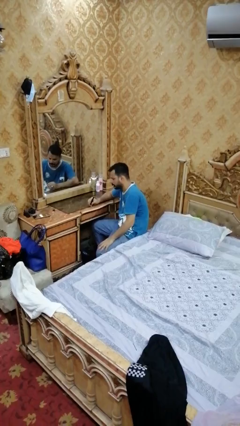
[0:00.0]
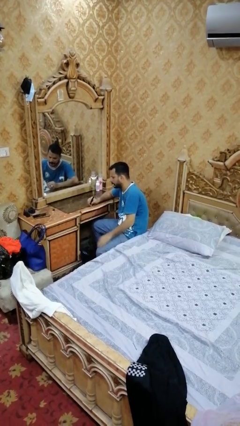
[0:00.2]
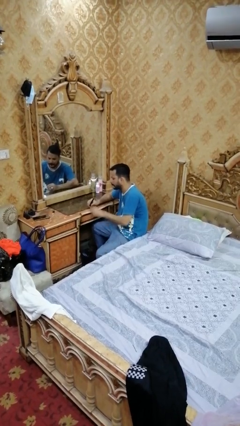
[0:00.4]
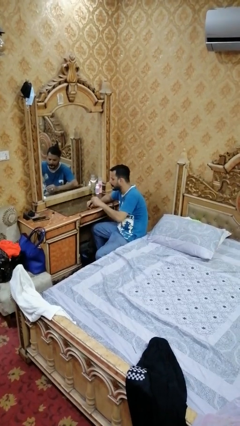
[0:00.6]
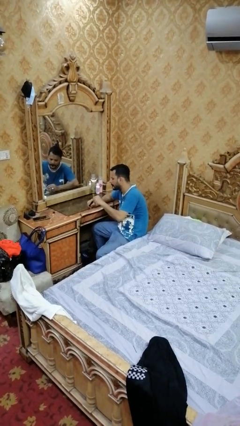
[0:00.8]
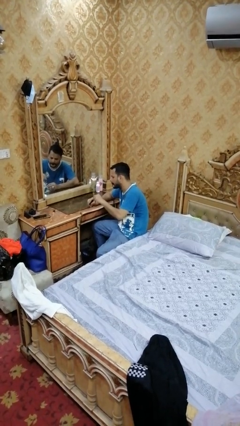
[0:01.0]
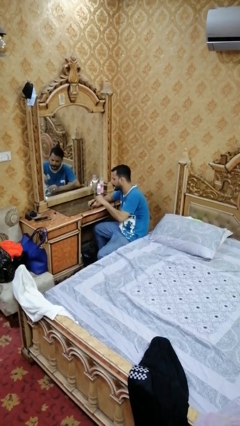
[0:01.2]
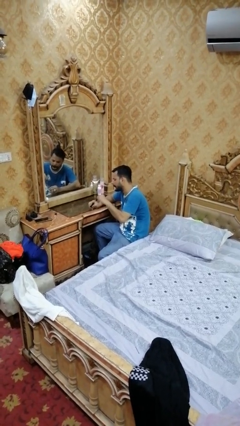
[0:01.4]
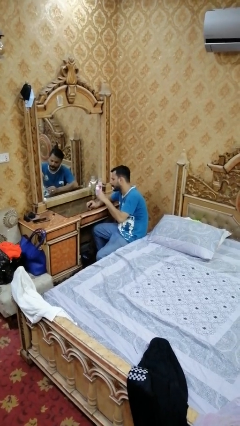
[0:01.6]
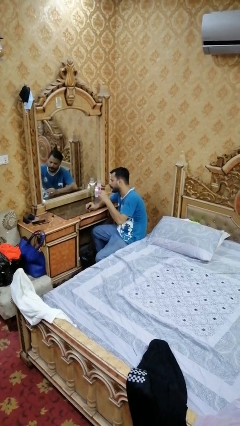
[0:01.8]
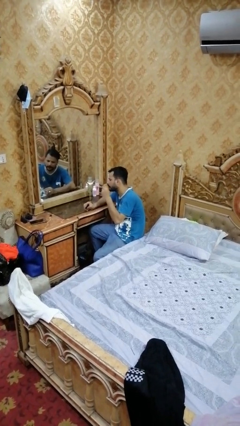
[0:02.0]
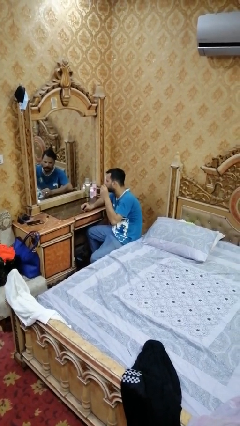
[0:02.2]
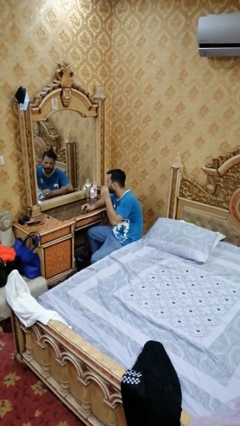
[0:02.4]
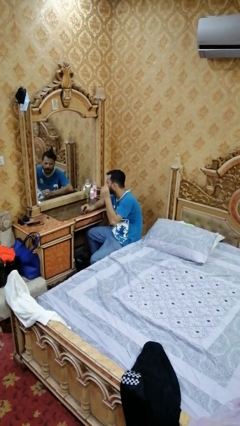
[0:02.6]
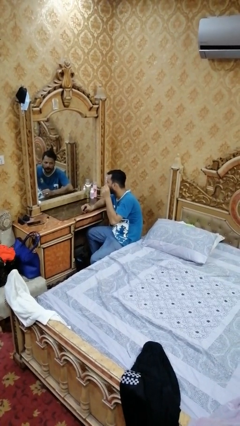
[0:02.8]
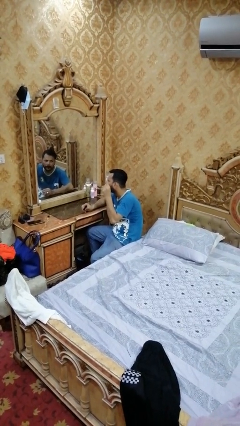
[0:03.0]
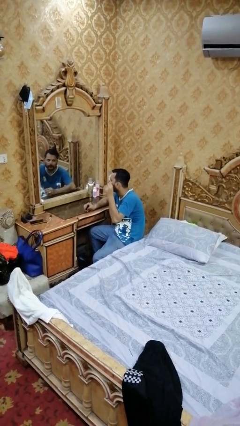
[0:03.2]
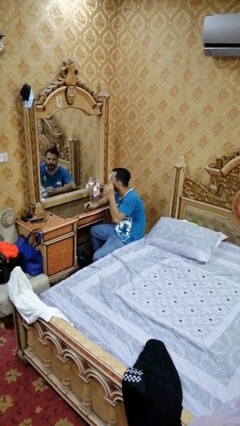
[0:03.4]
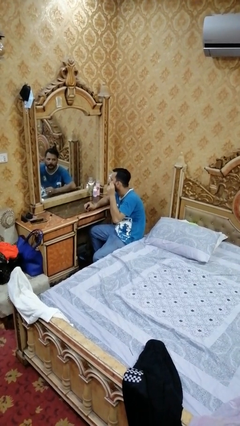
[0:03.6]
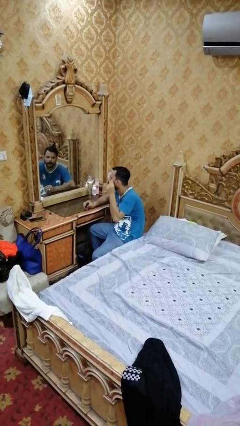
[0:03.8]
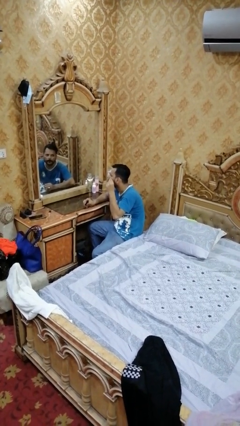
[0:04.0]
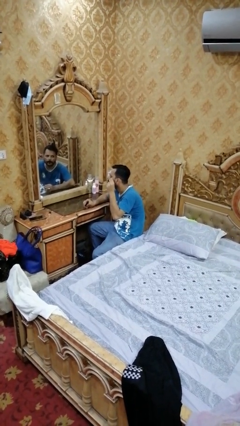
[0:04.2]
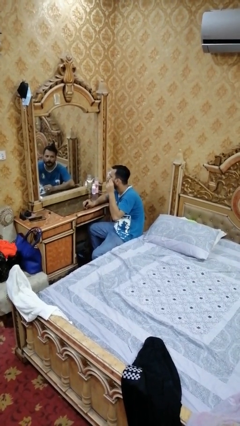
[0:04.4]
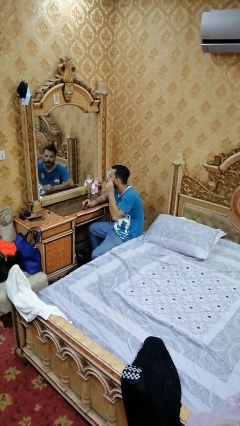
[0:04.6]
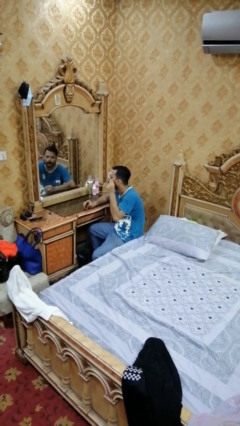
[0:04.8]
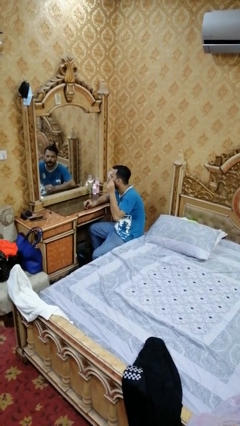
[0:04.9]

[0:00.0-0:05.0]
person applies eye makeup

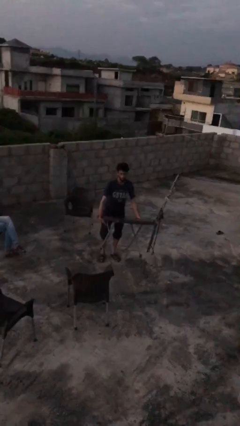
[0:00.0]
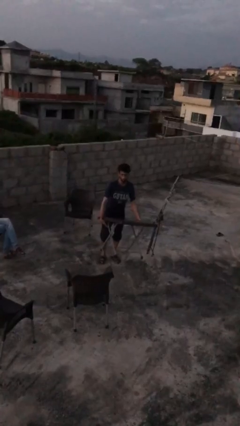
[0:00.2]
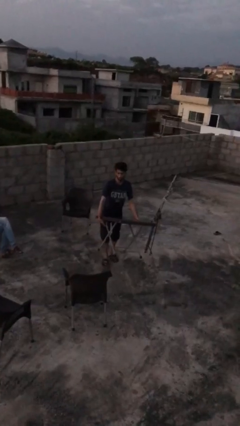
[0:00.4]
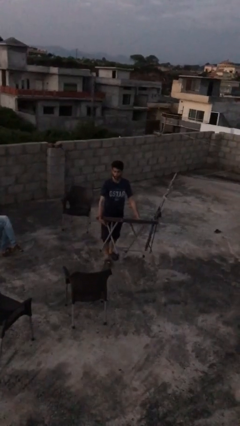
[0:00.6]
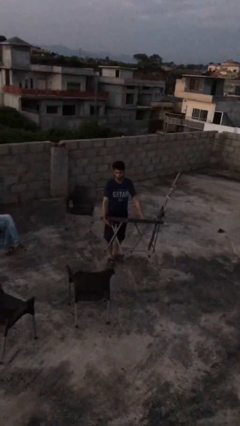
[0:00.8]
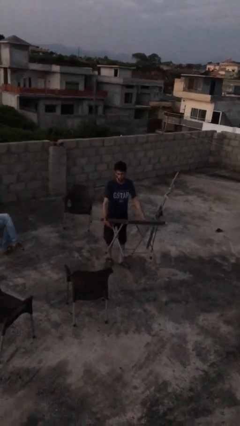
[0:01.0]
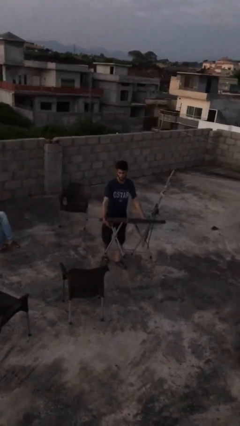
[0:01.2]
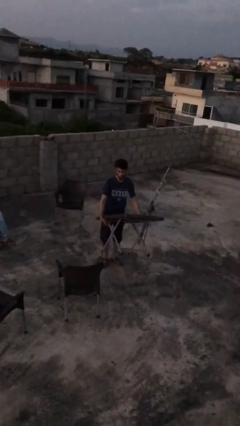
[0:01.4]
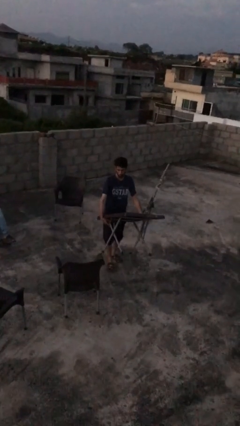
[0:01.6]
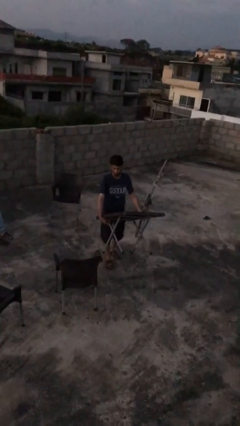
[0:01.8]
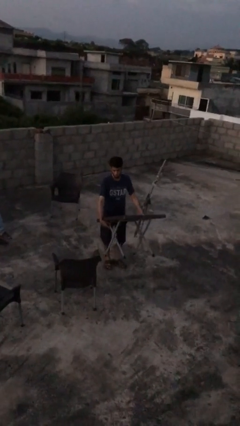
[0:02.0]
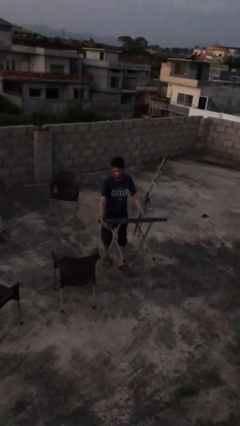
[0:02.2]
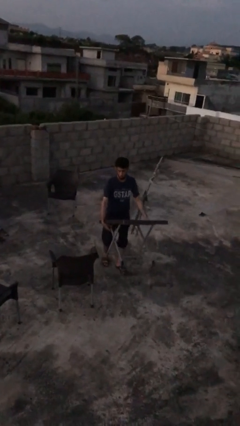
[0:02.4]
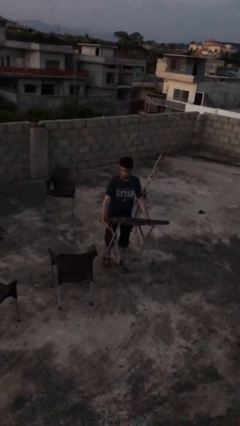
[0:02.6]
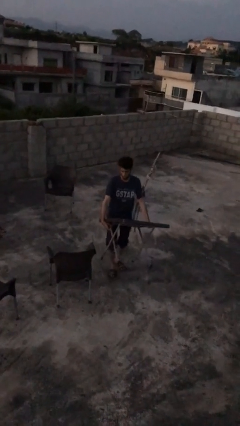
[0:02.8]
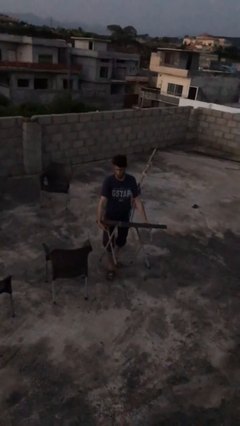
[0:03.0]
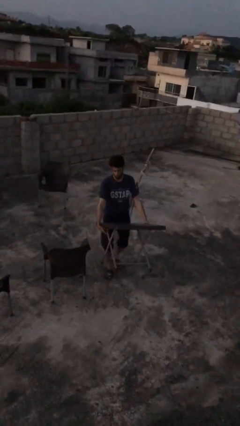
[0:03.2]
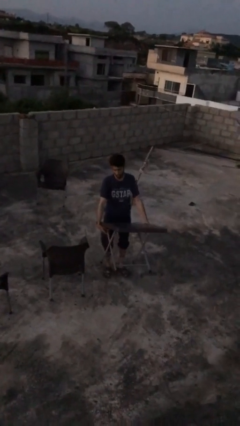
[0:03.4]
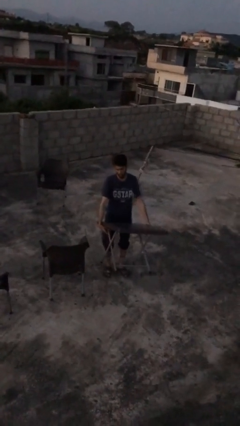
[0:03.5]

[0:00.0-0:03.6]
person carries heavy object

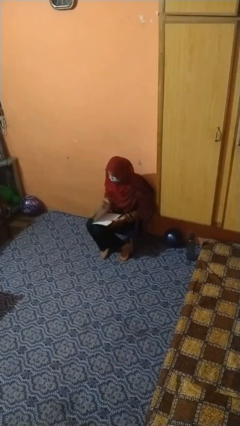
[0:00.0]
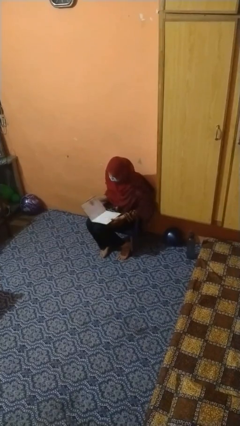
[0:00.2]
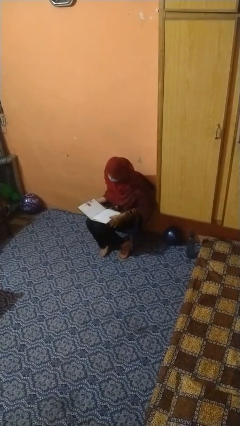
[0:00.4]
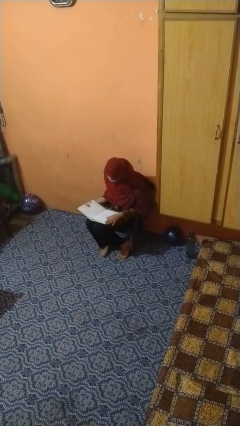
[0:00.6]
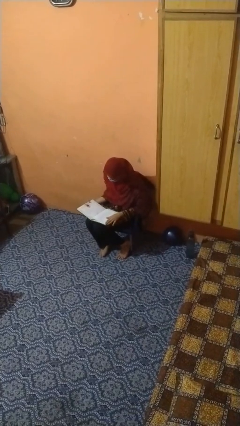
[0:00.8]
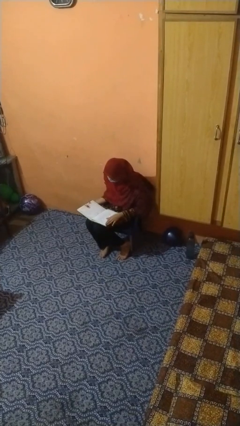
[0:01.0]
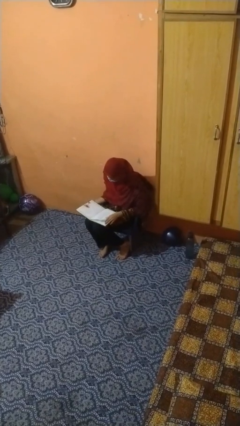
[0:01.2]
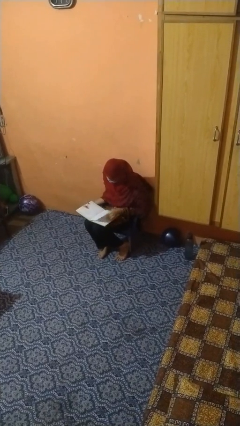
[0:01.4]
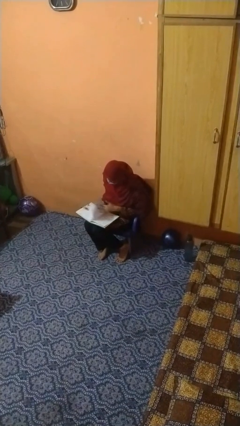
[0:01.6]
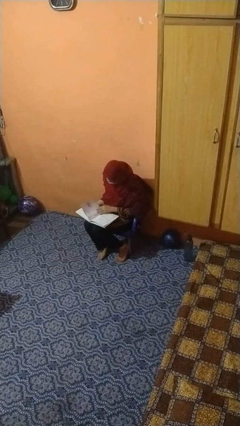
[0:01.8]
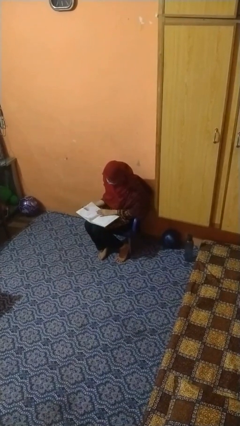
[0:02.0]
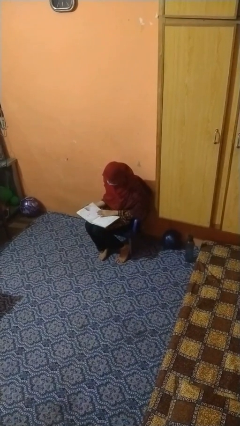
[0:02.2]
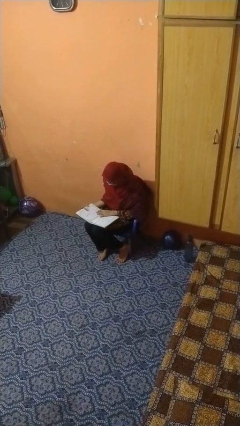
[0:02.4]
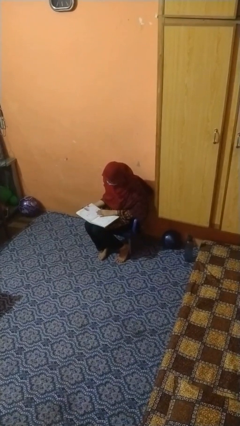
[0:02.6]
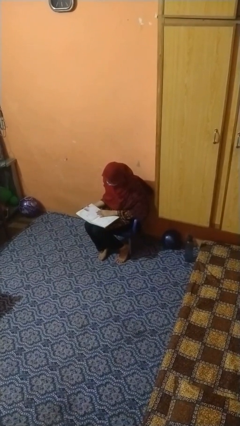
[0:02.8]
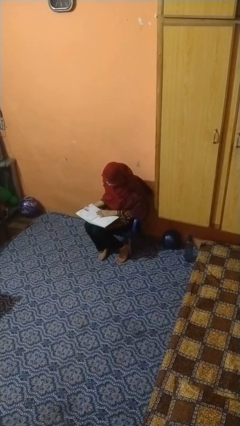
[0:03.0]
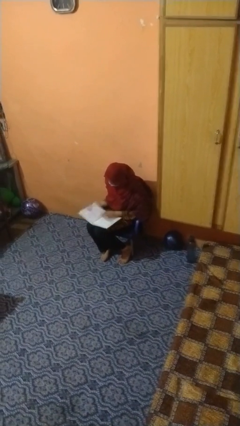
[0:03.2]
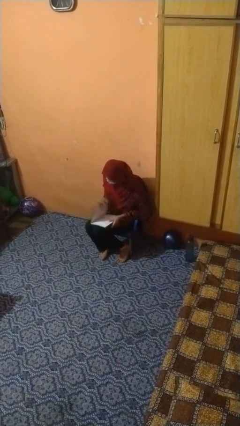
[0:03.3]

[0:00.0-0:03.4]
person reads book

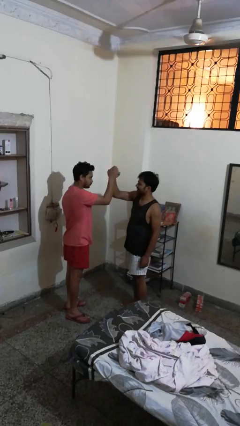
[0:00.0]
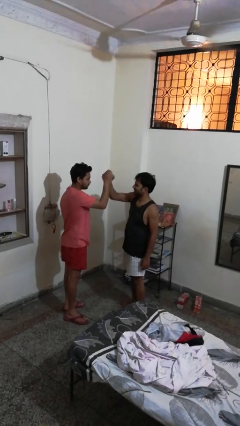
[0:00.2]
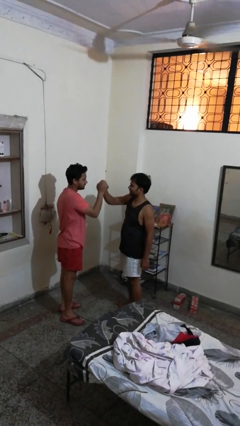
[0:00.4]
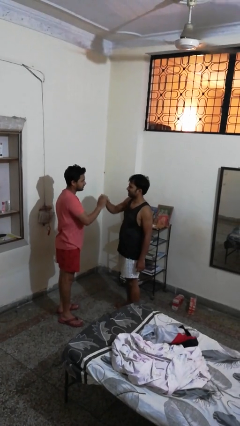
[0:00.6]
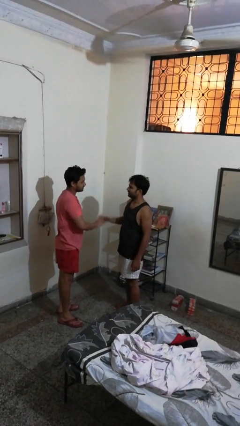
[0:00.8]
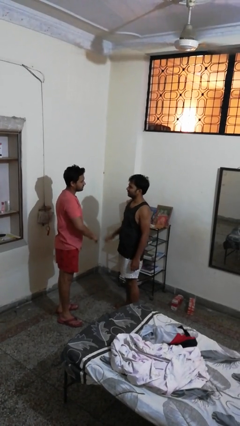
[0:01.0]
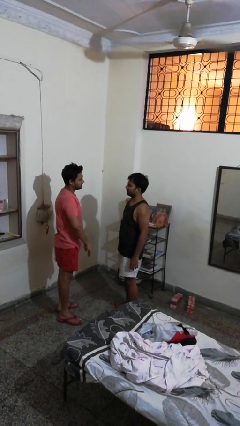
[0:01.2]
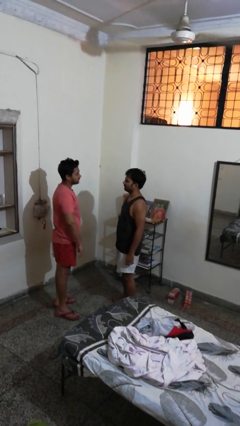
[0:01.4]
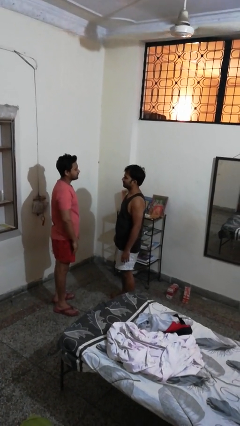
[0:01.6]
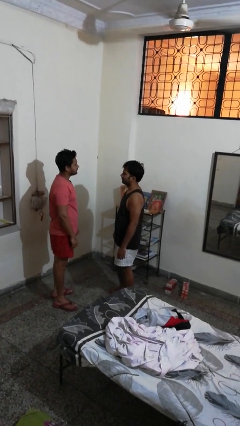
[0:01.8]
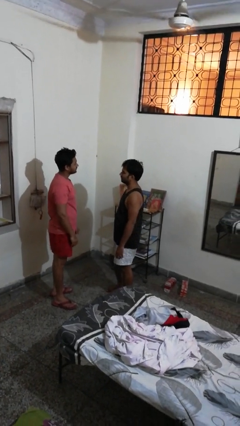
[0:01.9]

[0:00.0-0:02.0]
person highfives hand

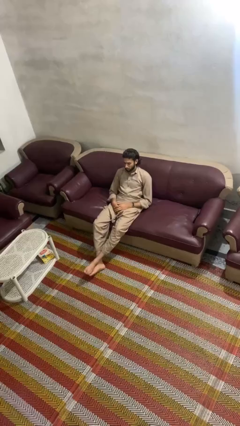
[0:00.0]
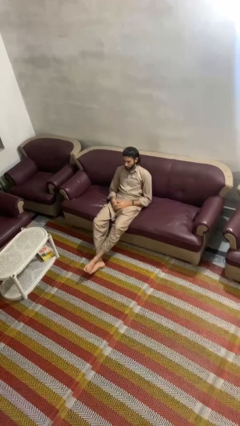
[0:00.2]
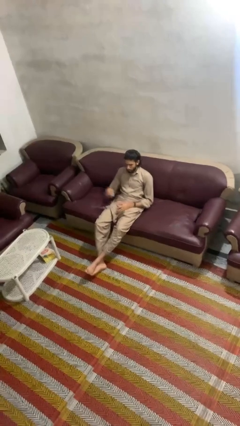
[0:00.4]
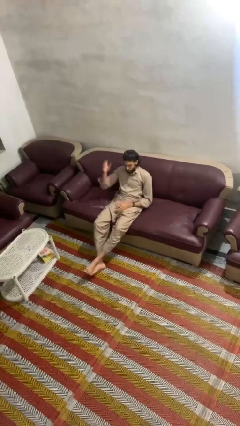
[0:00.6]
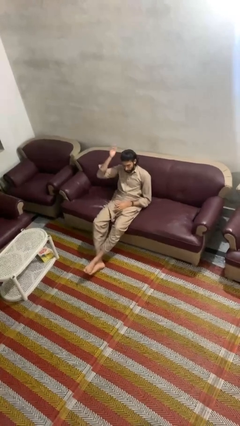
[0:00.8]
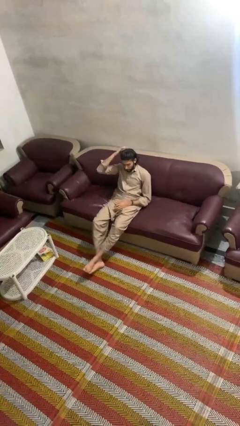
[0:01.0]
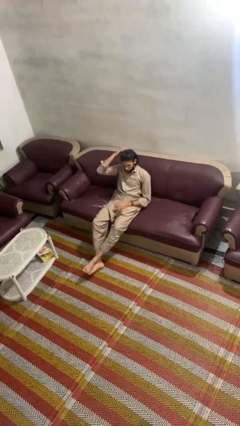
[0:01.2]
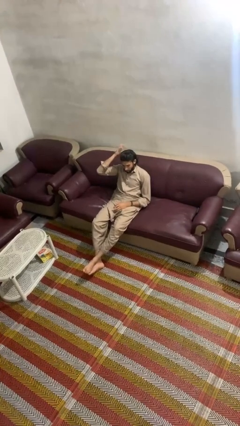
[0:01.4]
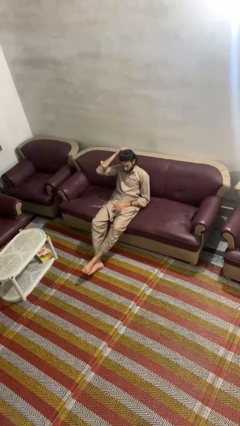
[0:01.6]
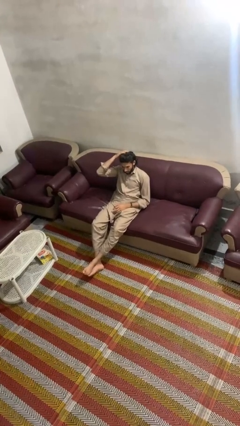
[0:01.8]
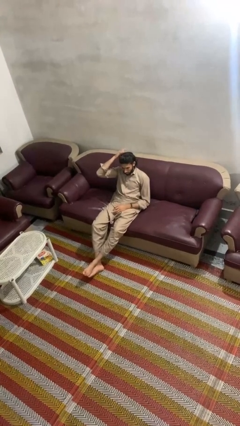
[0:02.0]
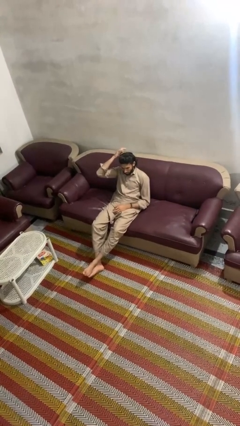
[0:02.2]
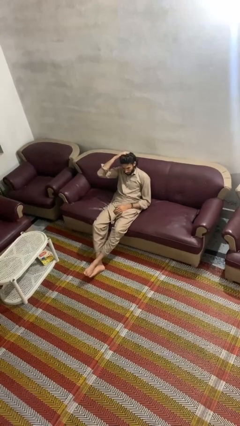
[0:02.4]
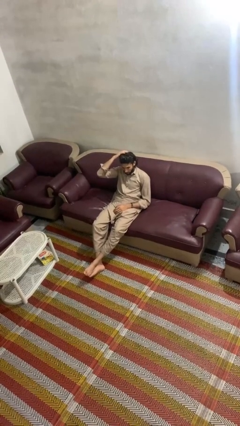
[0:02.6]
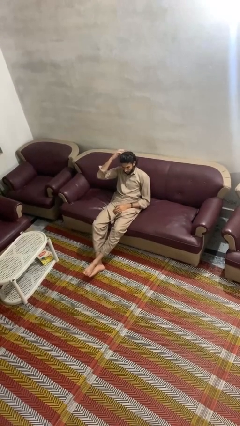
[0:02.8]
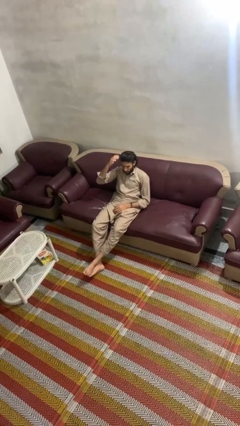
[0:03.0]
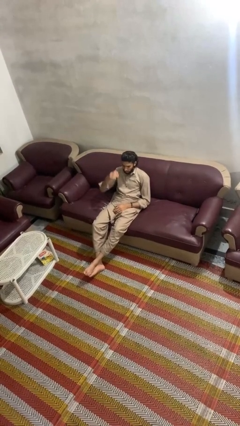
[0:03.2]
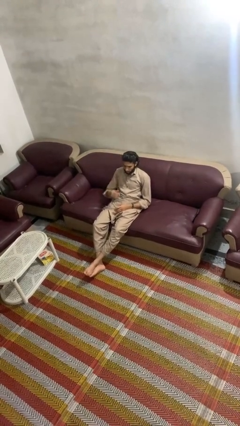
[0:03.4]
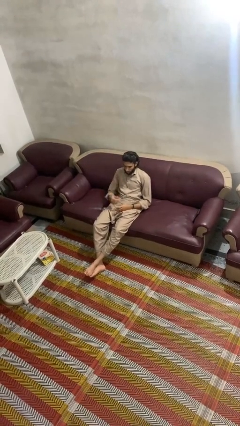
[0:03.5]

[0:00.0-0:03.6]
person pats head
